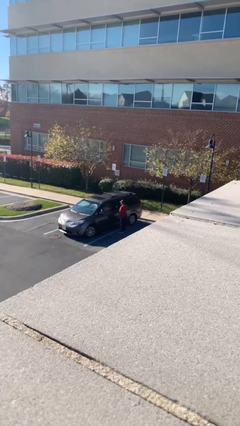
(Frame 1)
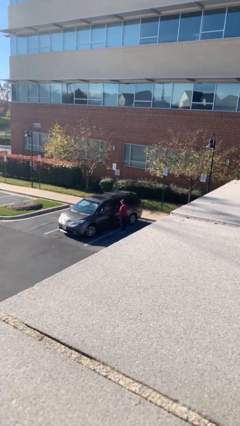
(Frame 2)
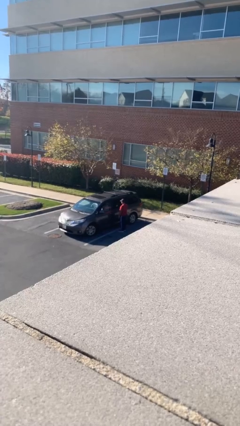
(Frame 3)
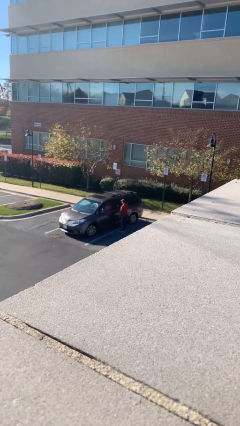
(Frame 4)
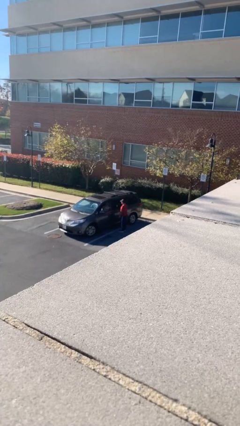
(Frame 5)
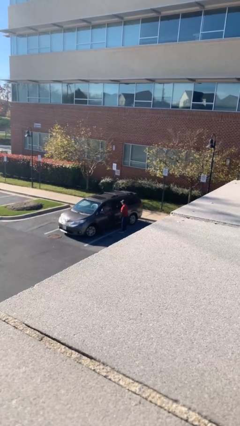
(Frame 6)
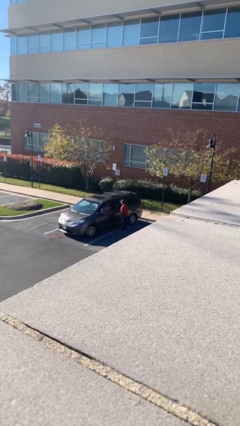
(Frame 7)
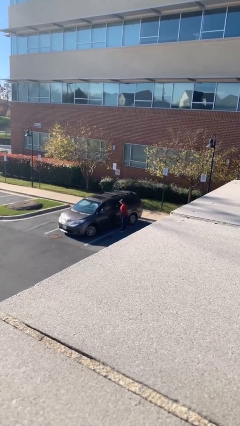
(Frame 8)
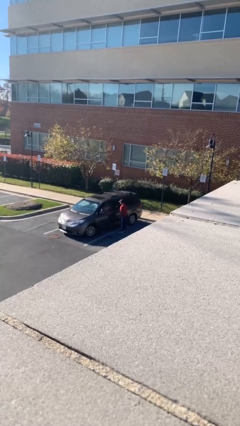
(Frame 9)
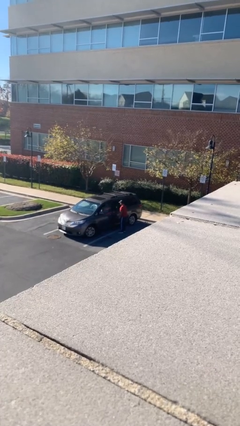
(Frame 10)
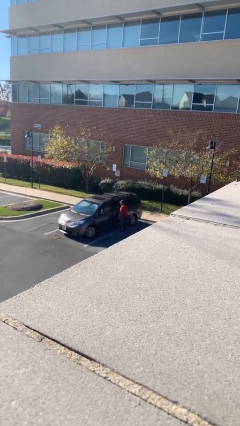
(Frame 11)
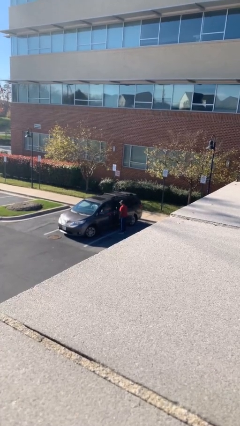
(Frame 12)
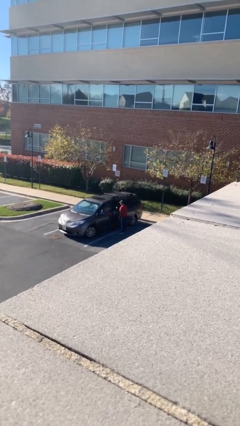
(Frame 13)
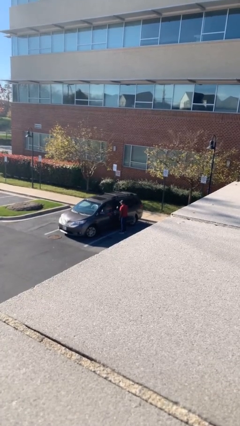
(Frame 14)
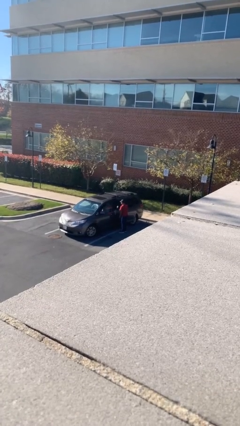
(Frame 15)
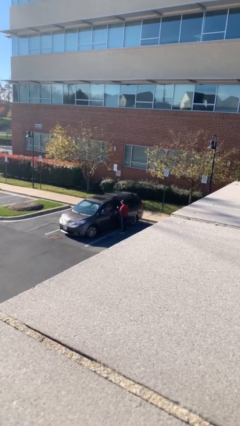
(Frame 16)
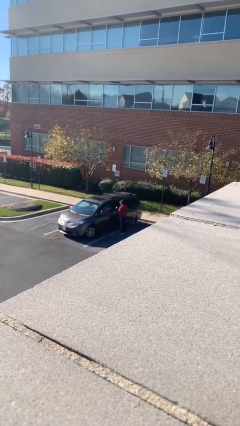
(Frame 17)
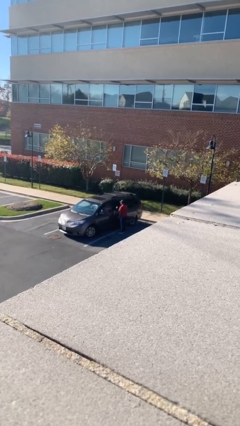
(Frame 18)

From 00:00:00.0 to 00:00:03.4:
person opens car door

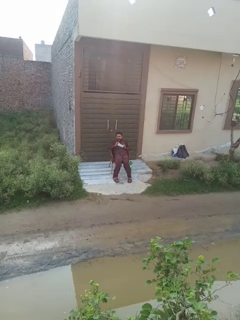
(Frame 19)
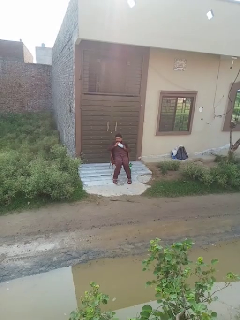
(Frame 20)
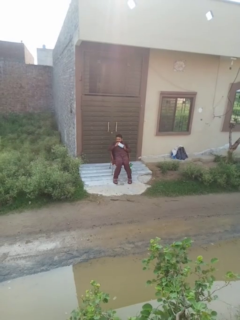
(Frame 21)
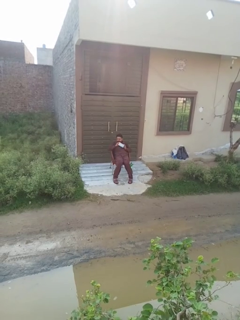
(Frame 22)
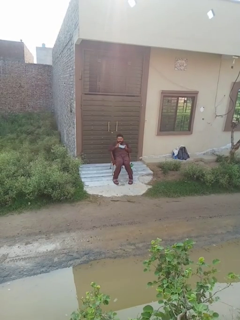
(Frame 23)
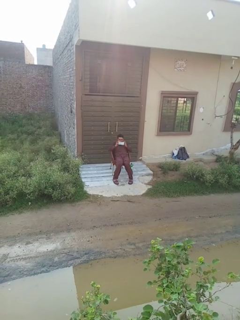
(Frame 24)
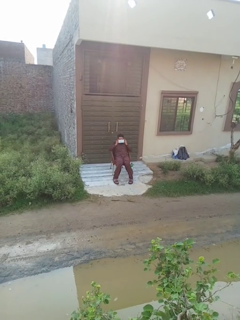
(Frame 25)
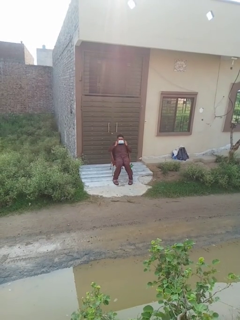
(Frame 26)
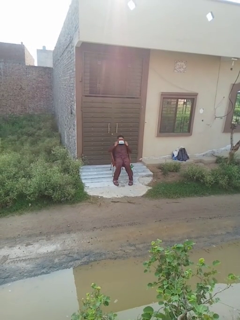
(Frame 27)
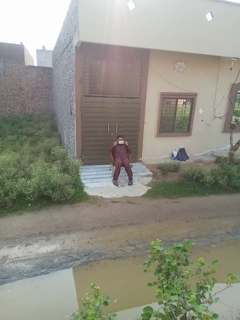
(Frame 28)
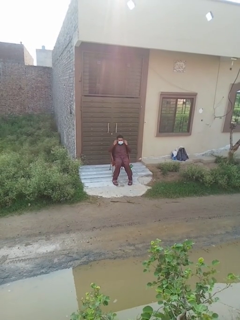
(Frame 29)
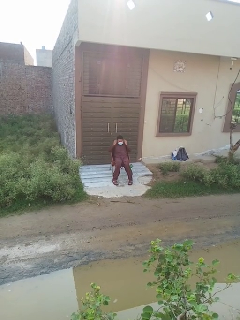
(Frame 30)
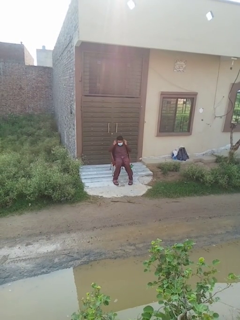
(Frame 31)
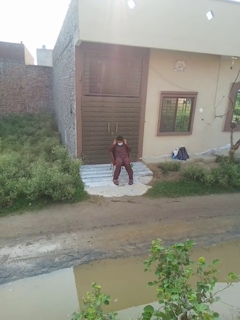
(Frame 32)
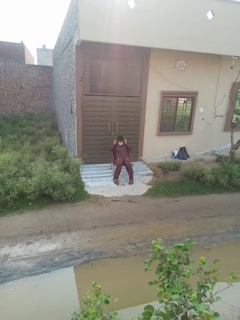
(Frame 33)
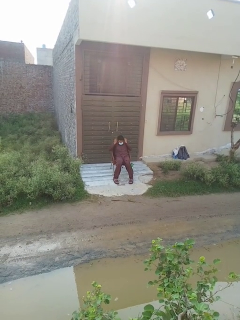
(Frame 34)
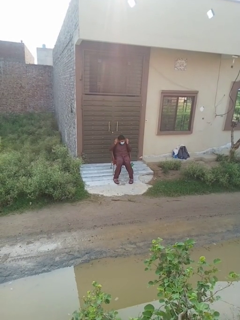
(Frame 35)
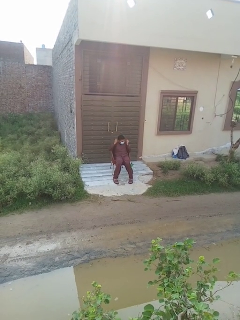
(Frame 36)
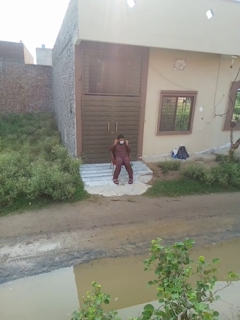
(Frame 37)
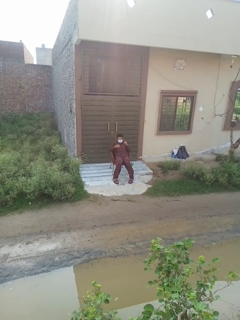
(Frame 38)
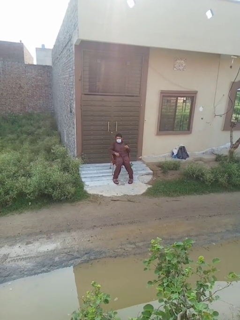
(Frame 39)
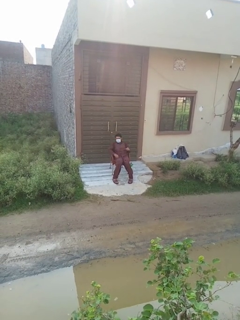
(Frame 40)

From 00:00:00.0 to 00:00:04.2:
person puts on facemask

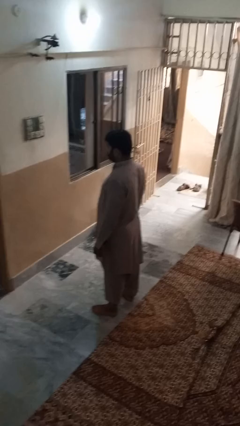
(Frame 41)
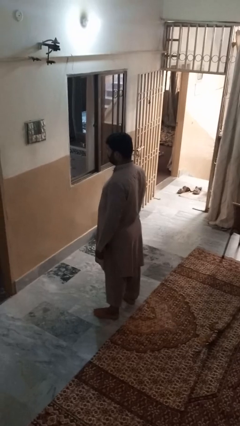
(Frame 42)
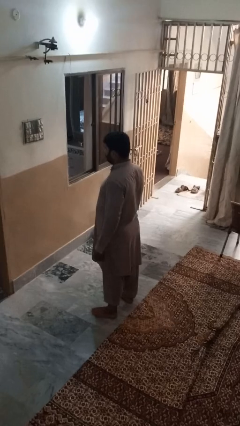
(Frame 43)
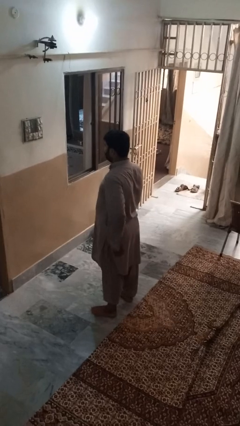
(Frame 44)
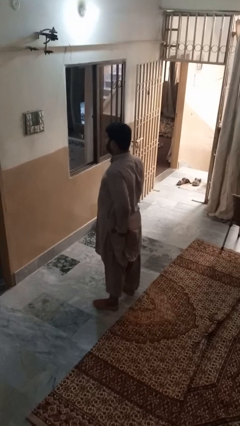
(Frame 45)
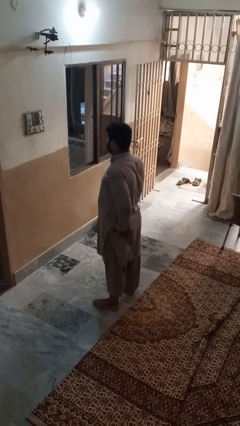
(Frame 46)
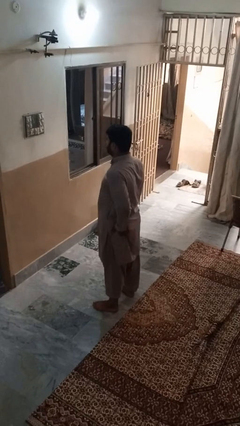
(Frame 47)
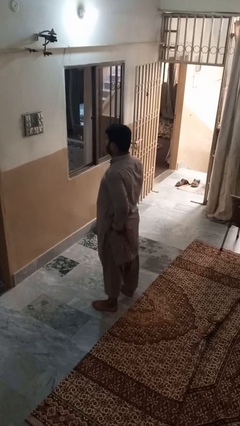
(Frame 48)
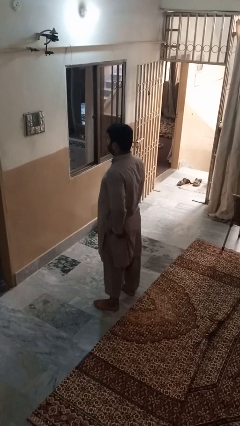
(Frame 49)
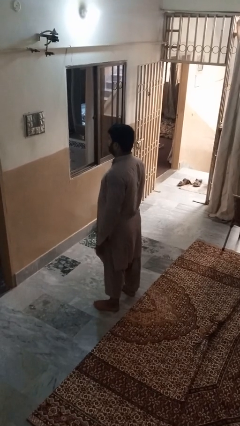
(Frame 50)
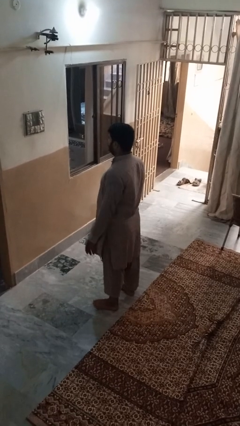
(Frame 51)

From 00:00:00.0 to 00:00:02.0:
person wiggles hips

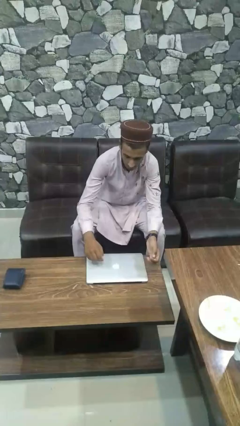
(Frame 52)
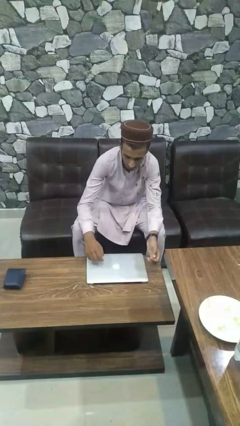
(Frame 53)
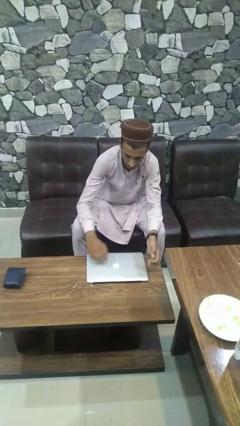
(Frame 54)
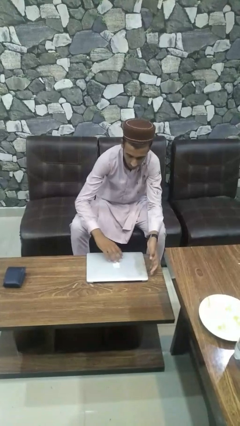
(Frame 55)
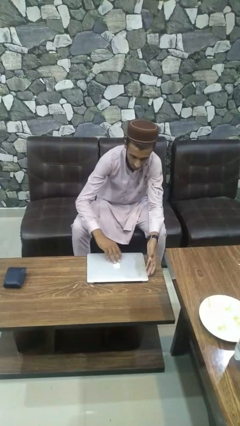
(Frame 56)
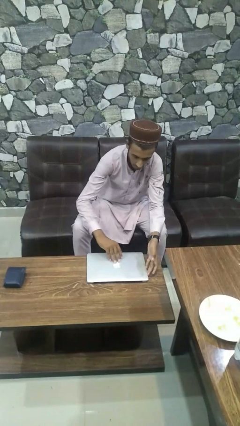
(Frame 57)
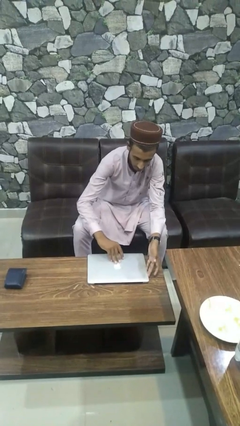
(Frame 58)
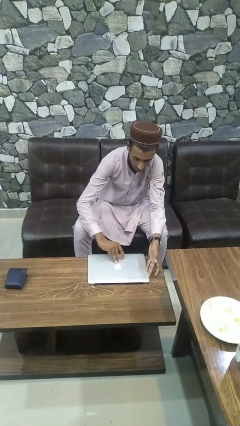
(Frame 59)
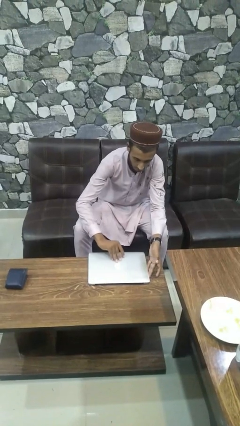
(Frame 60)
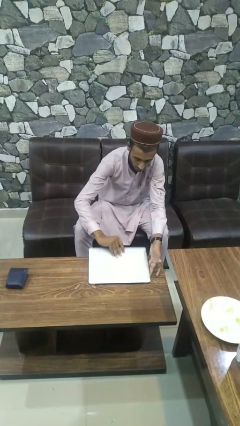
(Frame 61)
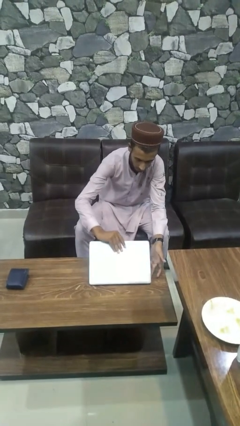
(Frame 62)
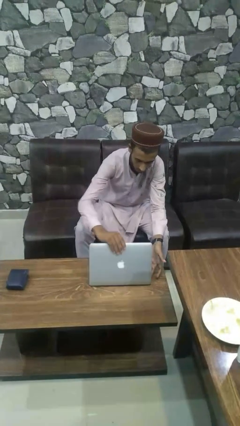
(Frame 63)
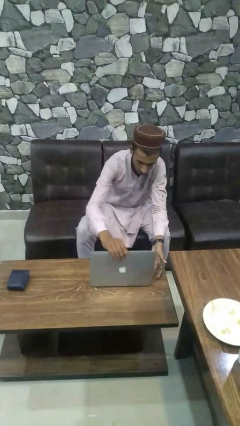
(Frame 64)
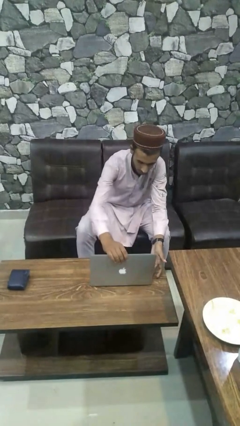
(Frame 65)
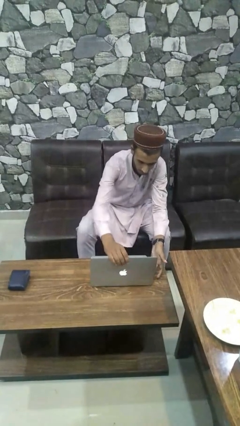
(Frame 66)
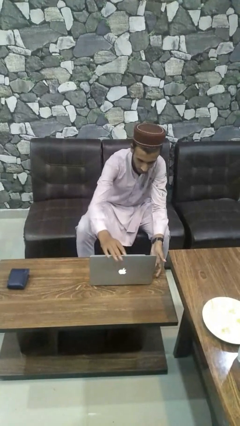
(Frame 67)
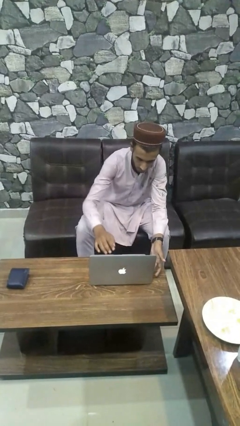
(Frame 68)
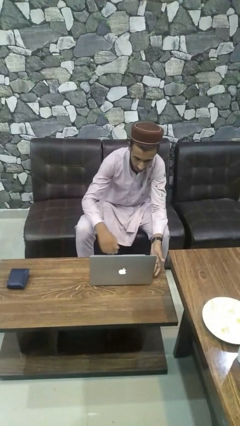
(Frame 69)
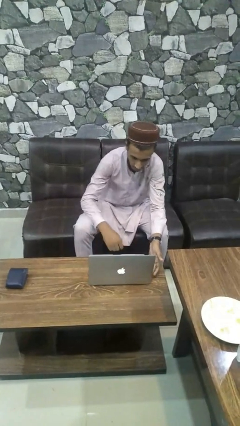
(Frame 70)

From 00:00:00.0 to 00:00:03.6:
person opens laptop

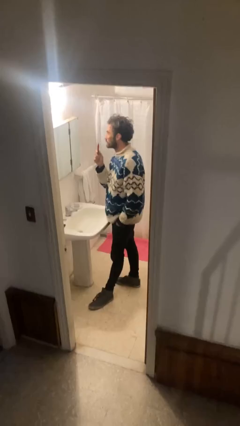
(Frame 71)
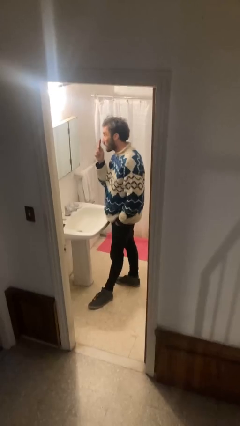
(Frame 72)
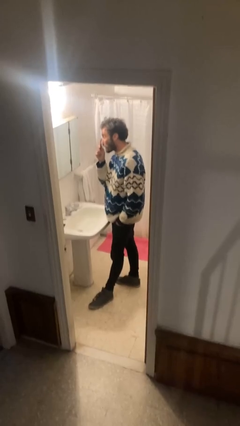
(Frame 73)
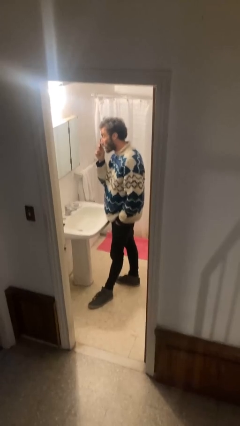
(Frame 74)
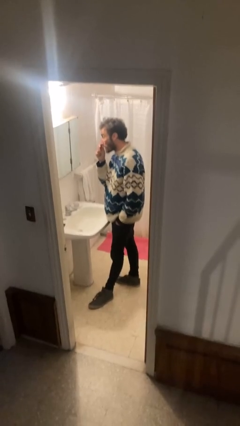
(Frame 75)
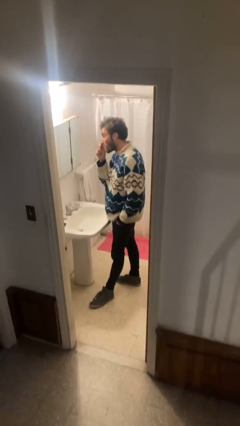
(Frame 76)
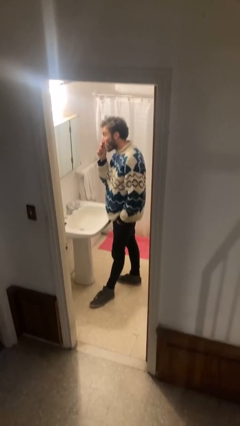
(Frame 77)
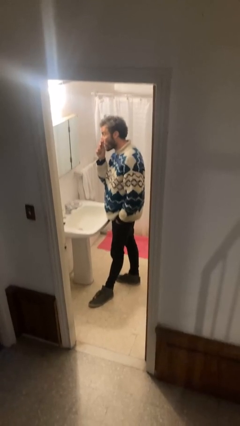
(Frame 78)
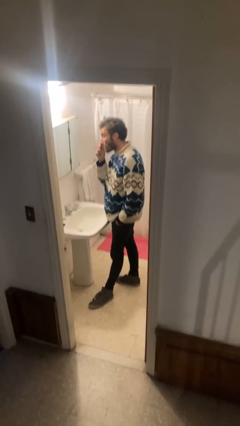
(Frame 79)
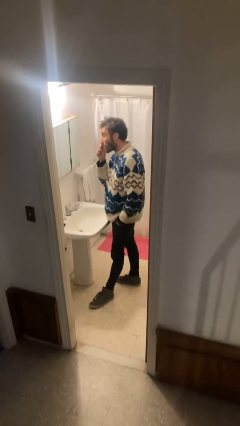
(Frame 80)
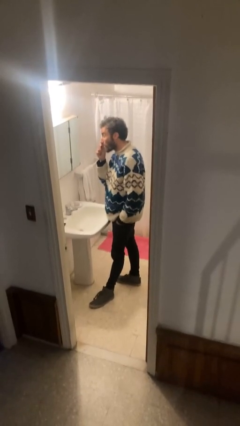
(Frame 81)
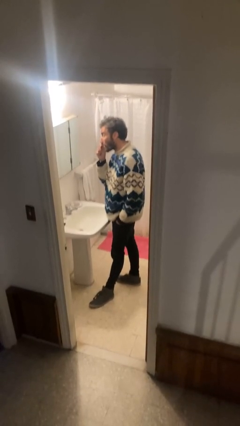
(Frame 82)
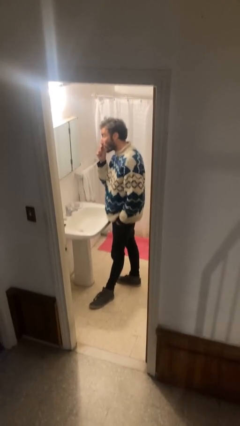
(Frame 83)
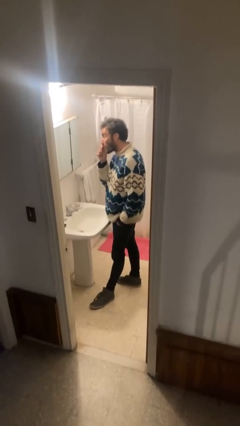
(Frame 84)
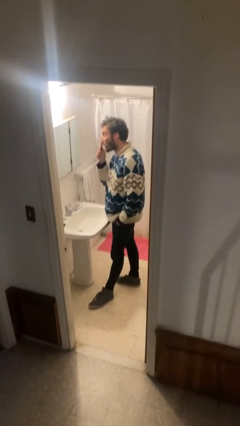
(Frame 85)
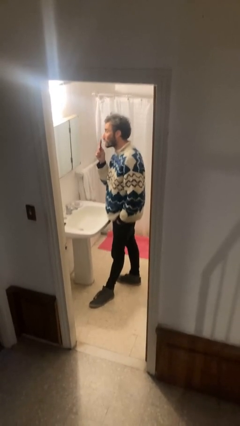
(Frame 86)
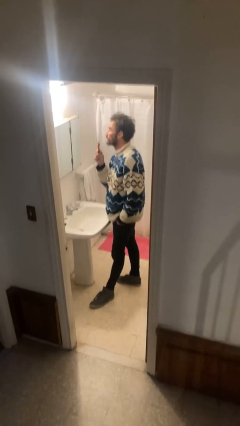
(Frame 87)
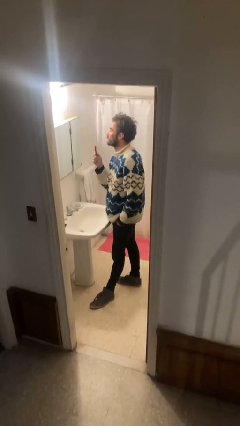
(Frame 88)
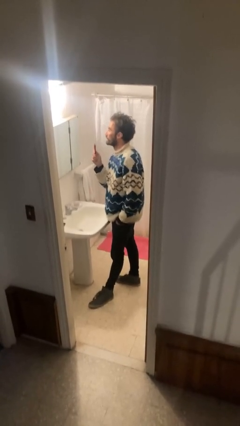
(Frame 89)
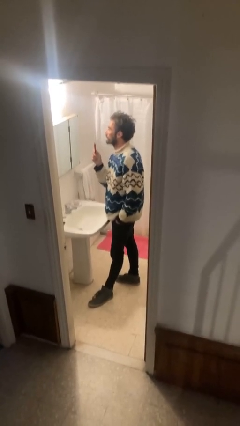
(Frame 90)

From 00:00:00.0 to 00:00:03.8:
person applies eye makeup

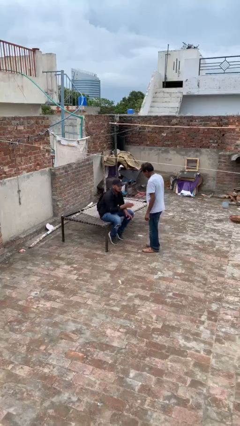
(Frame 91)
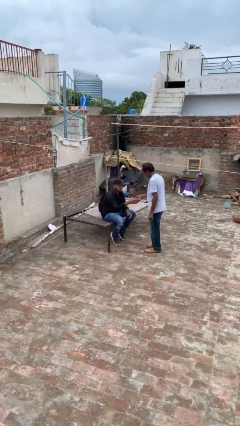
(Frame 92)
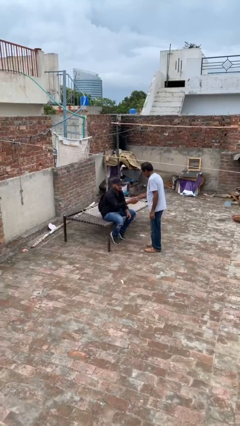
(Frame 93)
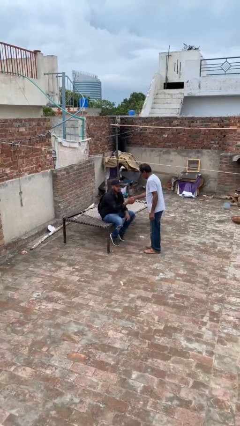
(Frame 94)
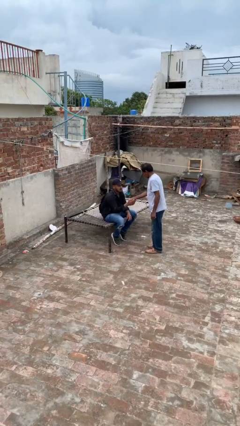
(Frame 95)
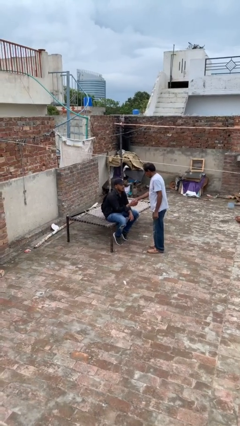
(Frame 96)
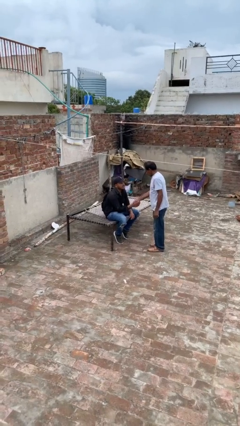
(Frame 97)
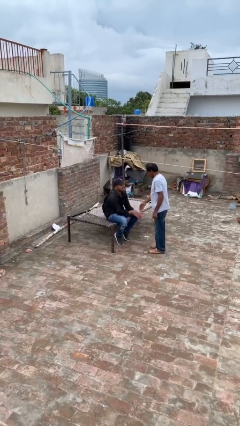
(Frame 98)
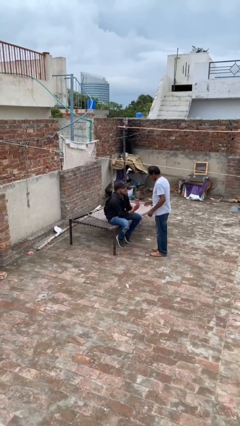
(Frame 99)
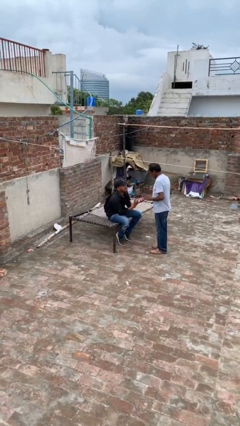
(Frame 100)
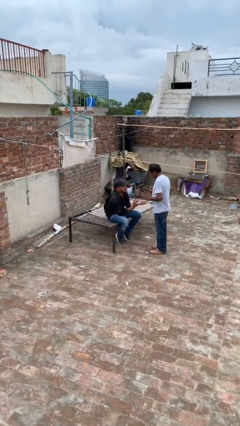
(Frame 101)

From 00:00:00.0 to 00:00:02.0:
person shakes hand
